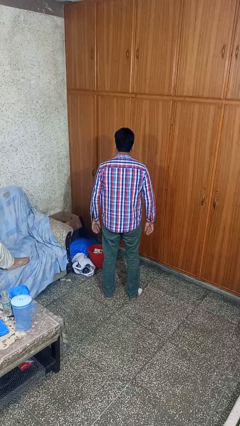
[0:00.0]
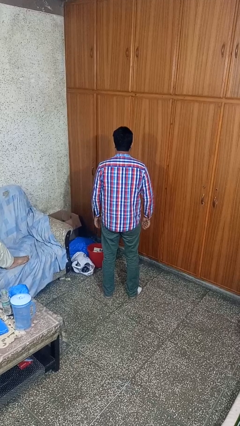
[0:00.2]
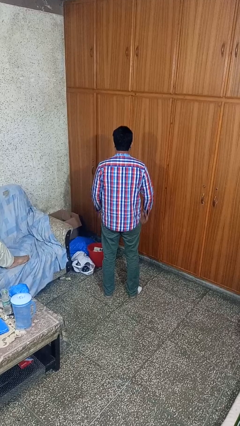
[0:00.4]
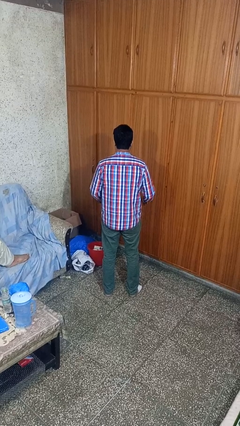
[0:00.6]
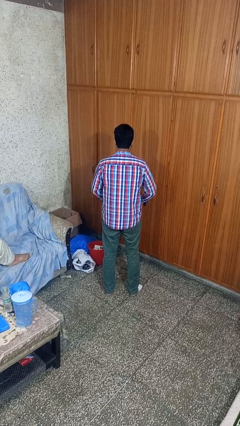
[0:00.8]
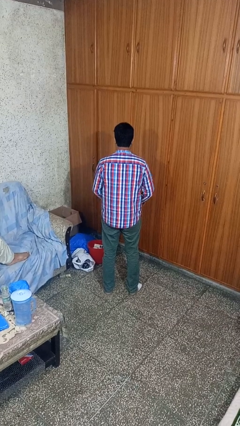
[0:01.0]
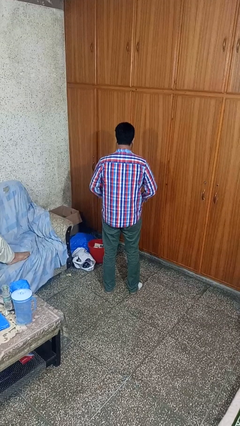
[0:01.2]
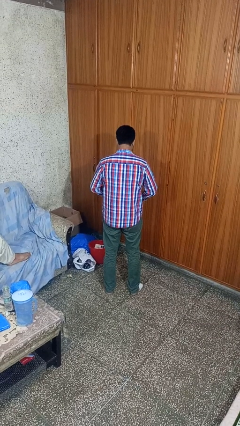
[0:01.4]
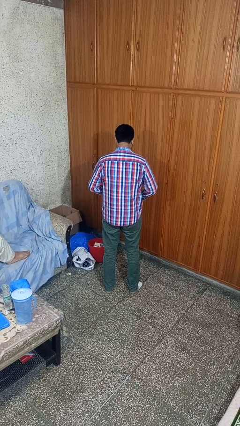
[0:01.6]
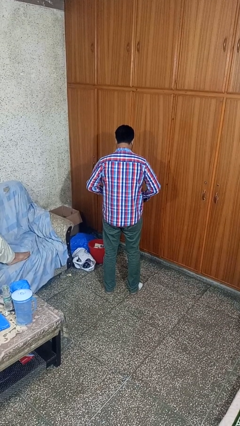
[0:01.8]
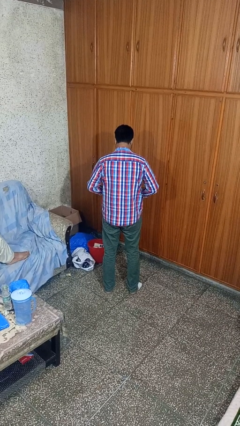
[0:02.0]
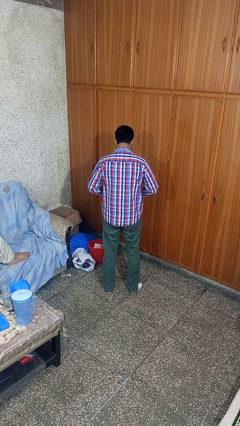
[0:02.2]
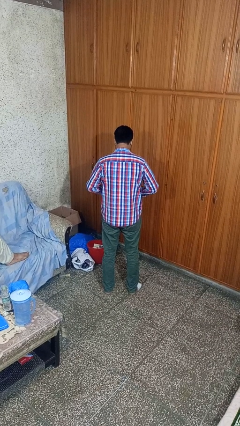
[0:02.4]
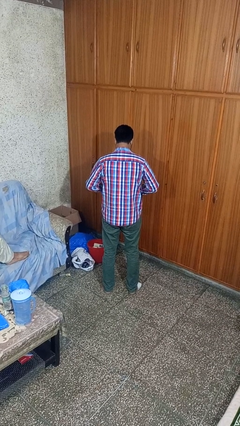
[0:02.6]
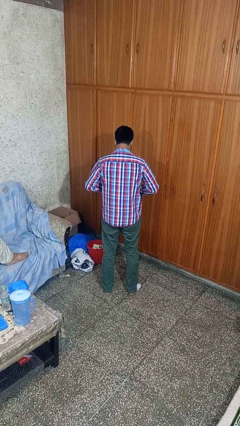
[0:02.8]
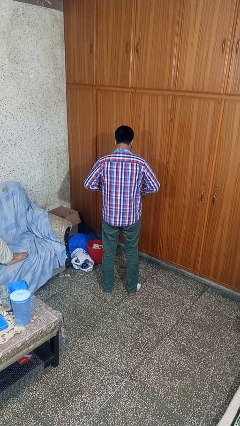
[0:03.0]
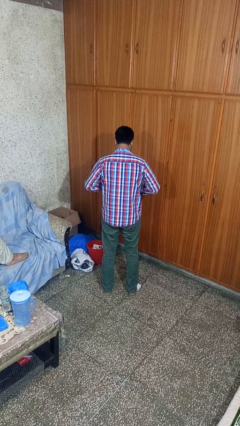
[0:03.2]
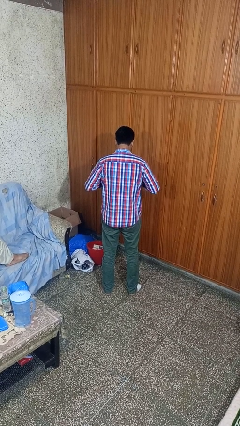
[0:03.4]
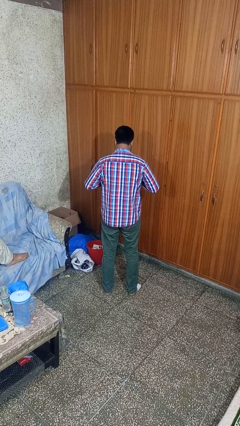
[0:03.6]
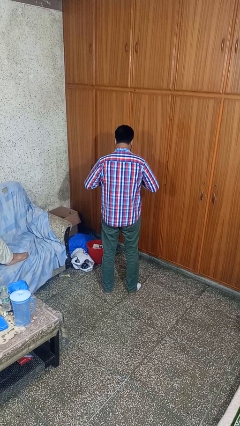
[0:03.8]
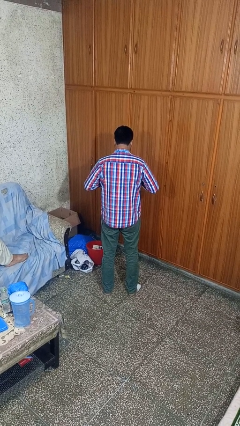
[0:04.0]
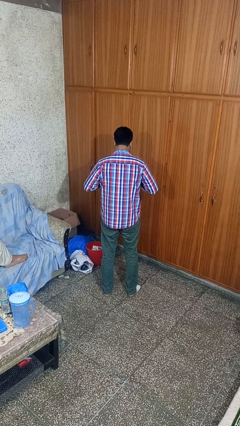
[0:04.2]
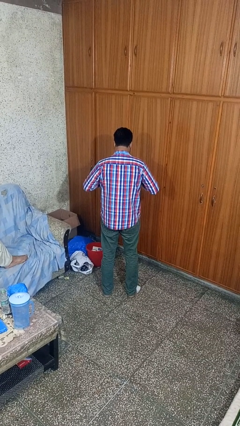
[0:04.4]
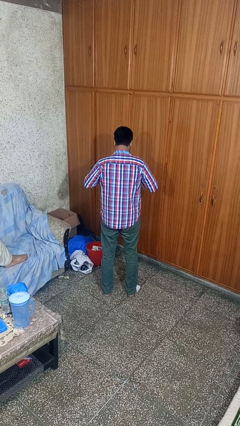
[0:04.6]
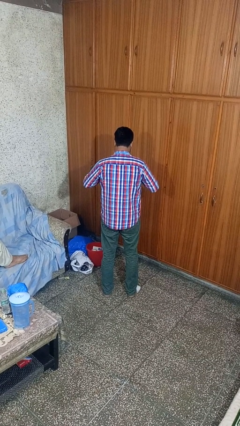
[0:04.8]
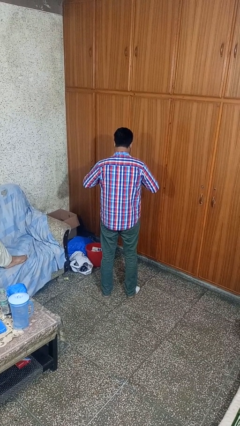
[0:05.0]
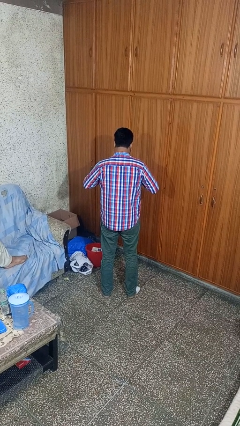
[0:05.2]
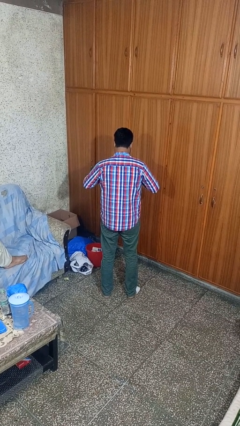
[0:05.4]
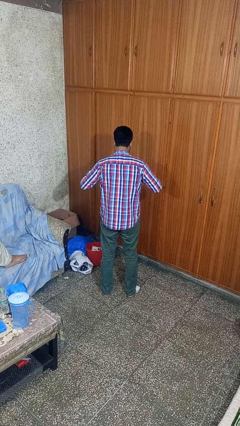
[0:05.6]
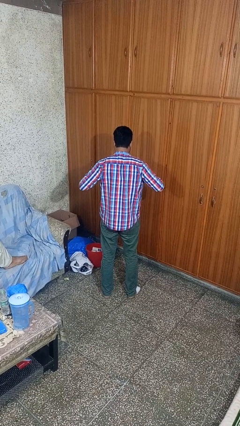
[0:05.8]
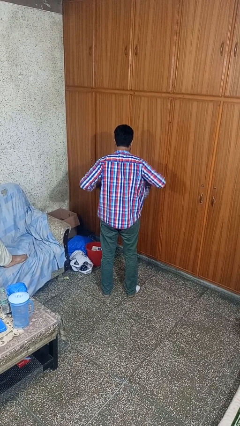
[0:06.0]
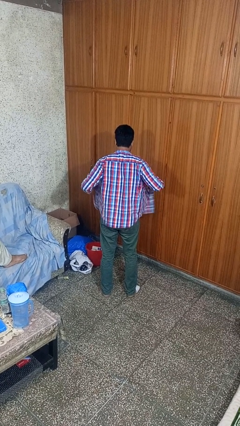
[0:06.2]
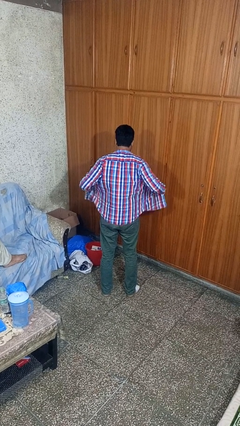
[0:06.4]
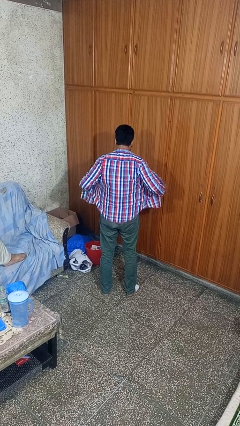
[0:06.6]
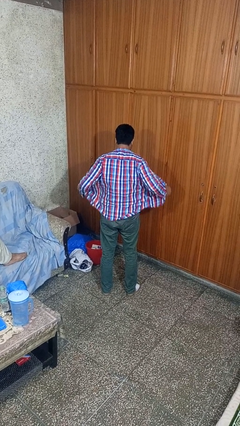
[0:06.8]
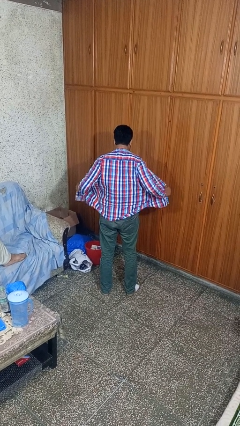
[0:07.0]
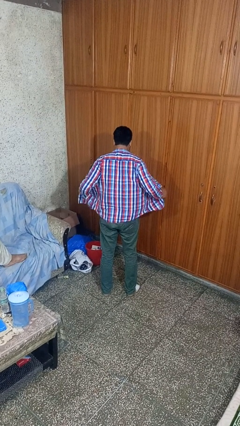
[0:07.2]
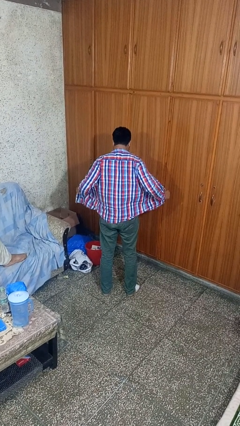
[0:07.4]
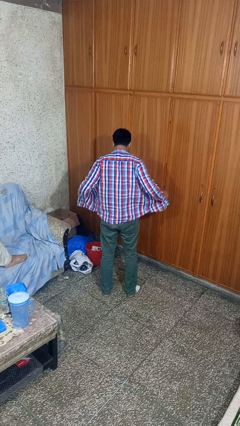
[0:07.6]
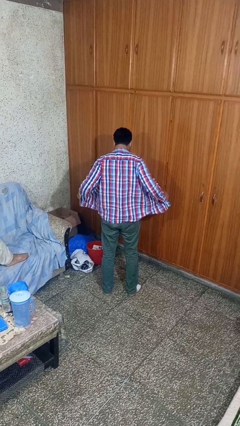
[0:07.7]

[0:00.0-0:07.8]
person unbuttons shirt

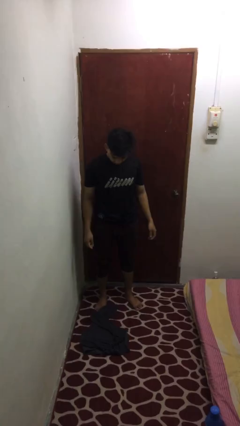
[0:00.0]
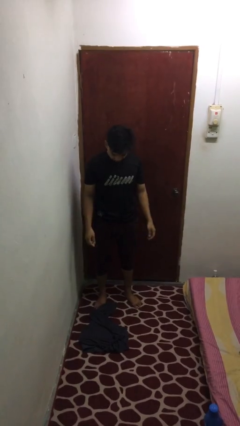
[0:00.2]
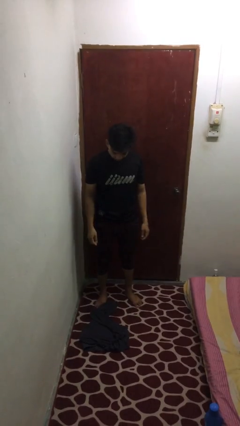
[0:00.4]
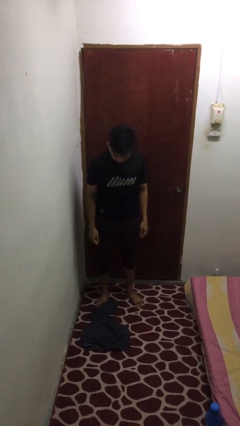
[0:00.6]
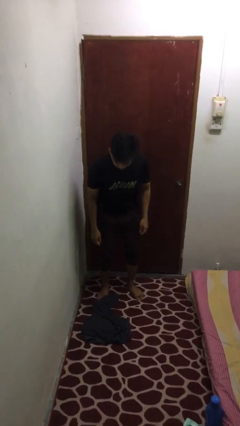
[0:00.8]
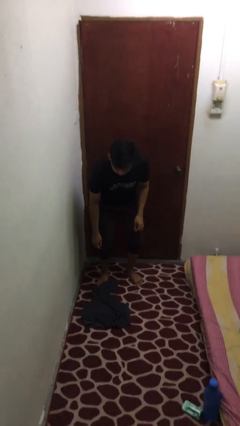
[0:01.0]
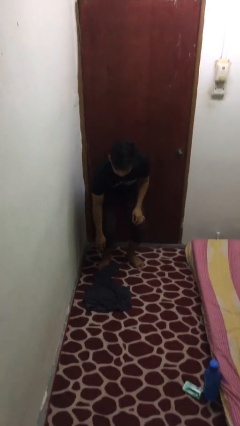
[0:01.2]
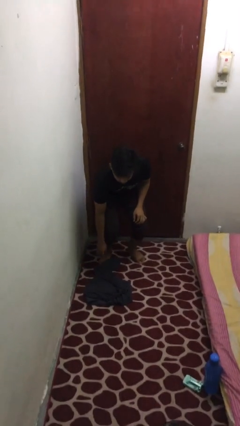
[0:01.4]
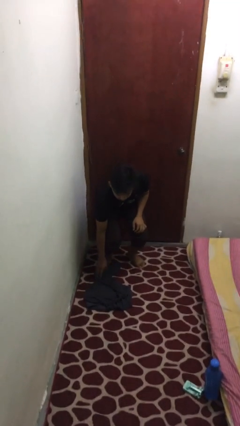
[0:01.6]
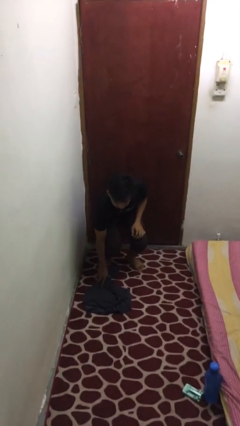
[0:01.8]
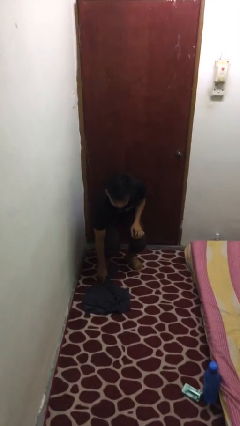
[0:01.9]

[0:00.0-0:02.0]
person picks up object from floor

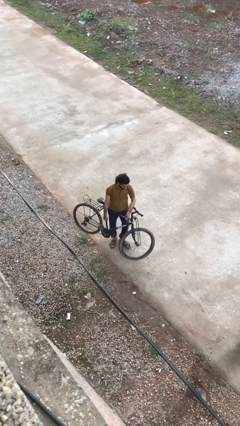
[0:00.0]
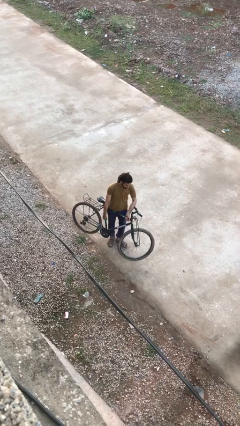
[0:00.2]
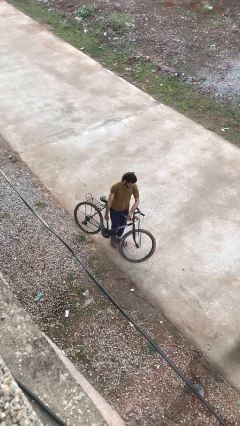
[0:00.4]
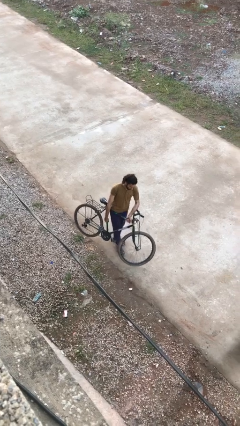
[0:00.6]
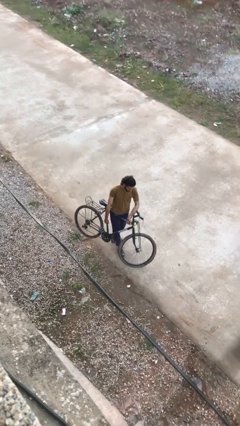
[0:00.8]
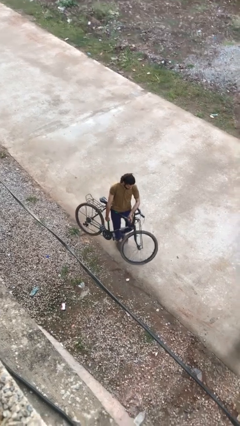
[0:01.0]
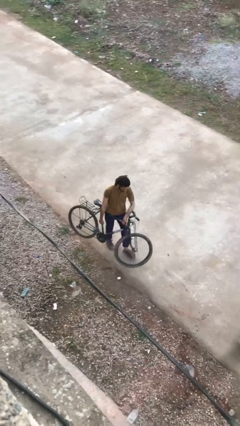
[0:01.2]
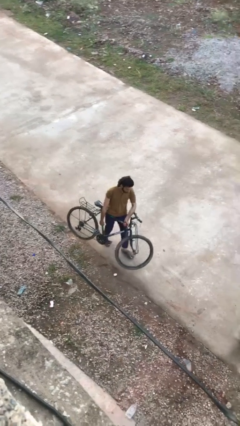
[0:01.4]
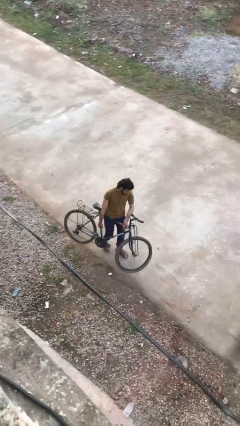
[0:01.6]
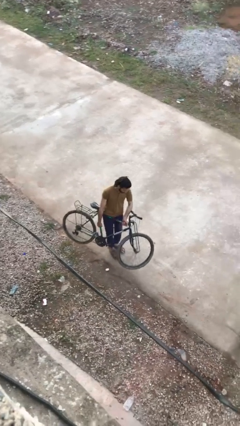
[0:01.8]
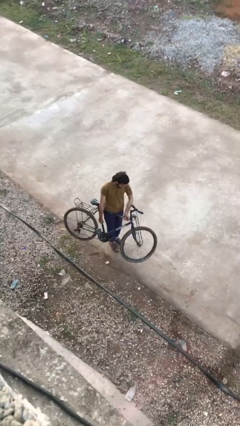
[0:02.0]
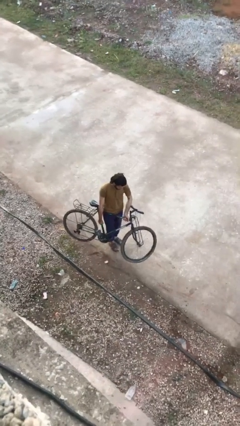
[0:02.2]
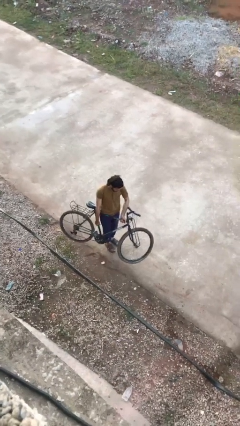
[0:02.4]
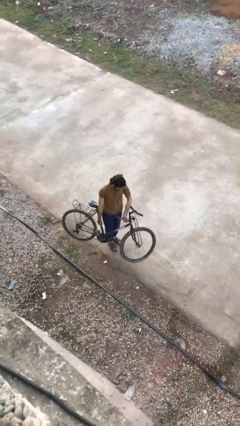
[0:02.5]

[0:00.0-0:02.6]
person carries bicycle

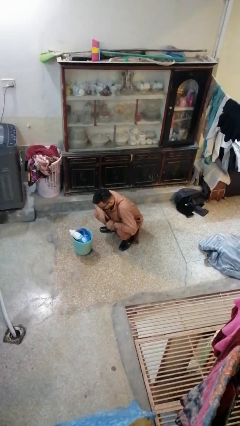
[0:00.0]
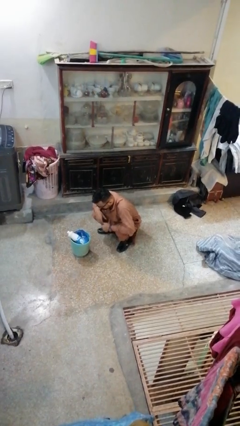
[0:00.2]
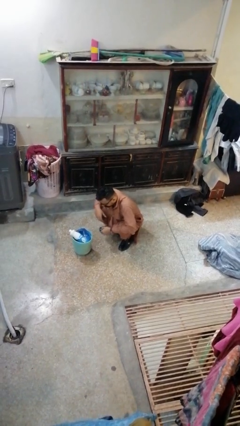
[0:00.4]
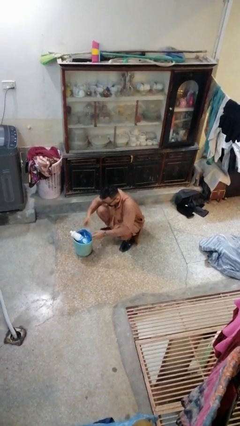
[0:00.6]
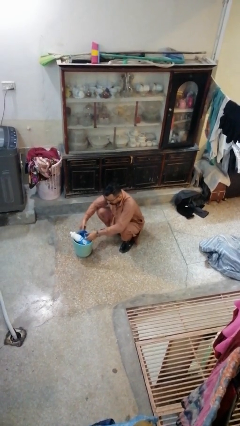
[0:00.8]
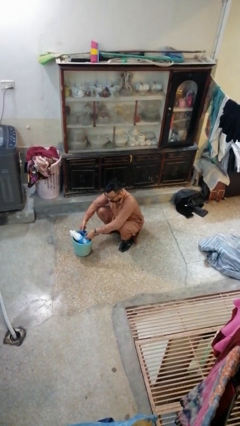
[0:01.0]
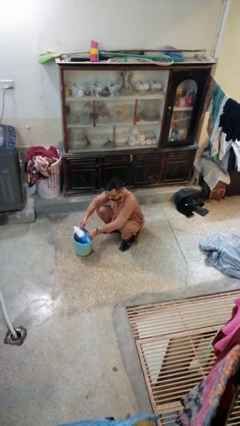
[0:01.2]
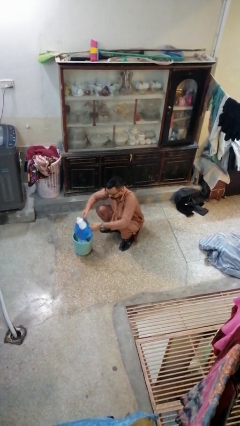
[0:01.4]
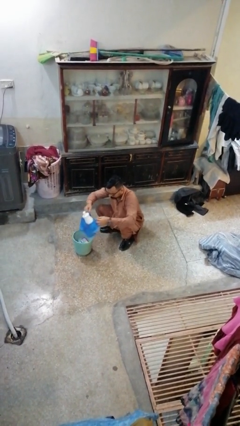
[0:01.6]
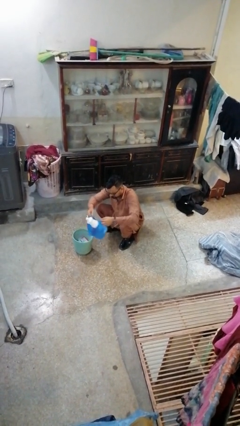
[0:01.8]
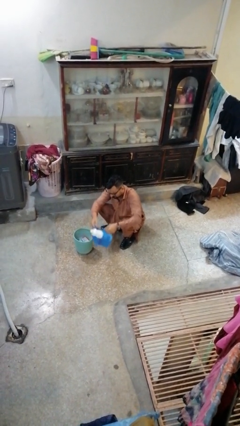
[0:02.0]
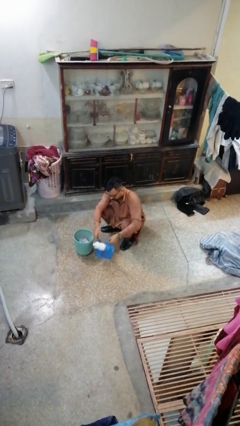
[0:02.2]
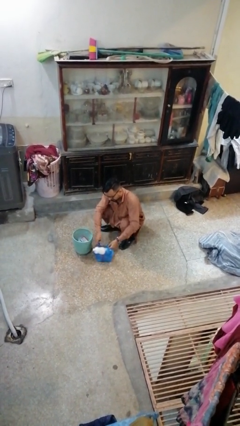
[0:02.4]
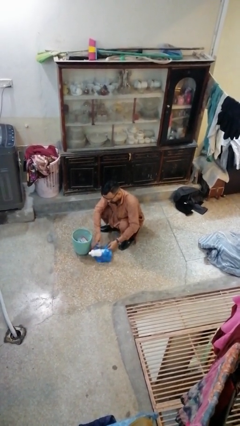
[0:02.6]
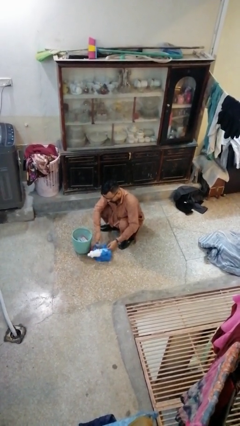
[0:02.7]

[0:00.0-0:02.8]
person removes trashbag from trashcan

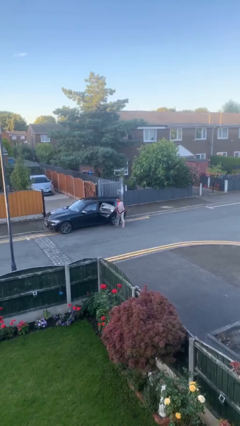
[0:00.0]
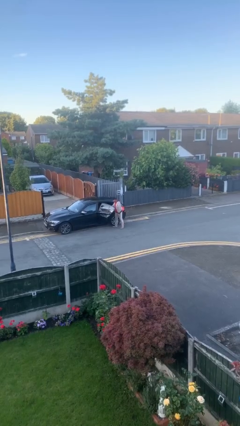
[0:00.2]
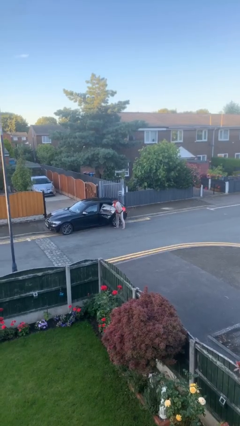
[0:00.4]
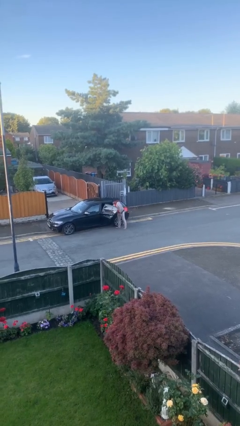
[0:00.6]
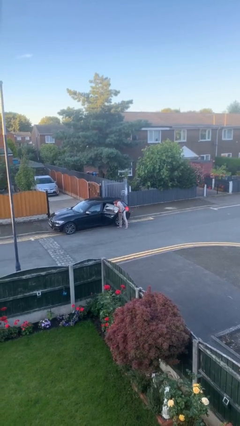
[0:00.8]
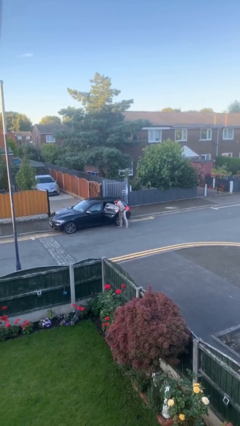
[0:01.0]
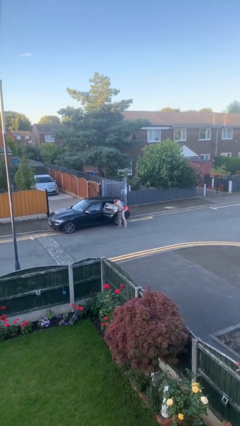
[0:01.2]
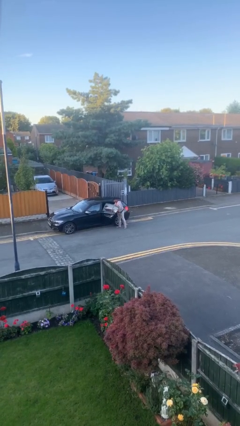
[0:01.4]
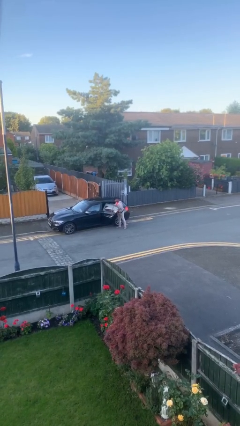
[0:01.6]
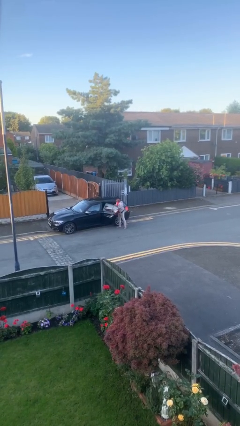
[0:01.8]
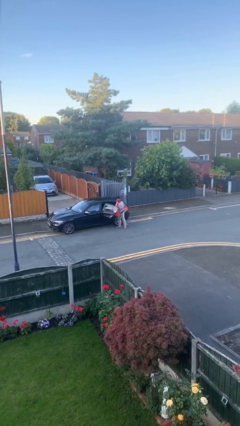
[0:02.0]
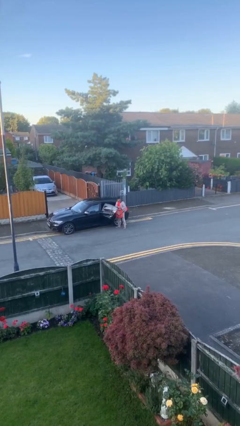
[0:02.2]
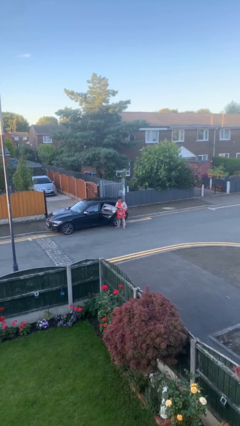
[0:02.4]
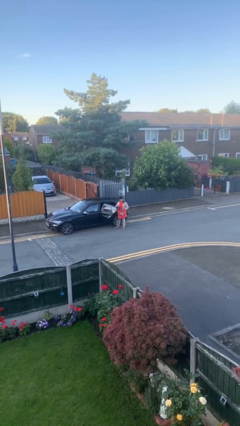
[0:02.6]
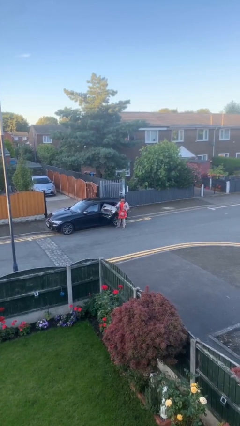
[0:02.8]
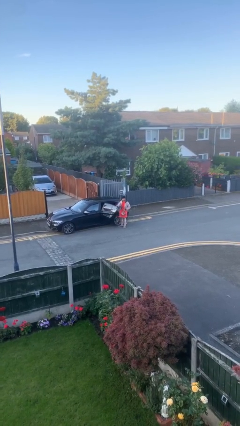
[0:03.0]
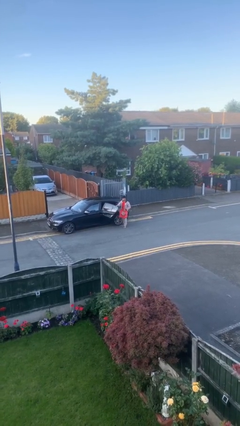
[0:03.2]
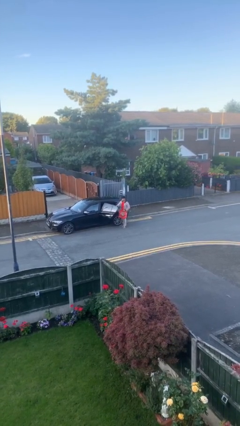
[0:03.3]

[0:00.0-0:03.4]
person unloads car
